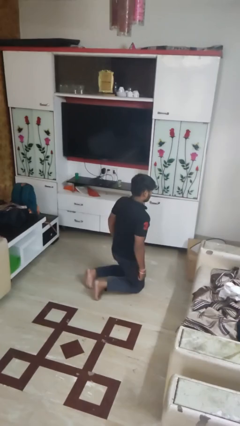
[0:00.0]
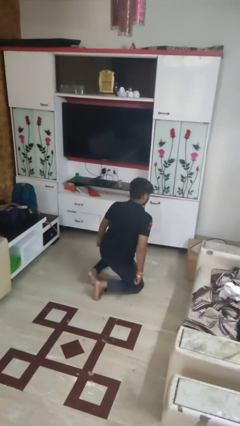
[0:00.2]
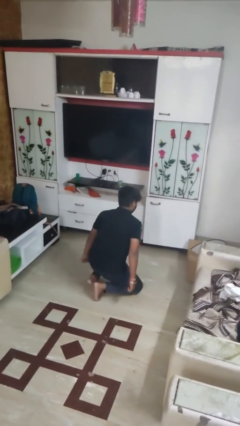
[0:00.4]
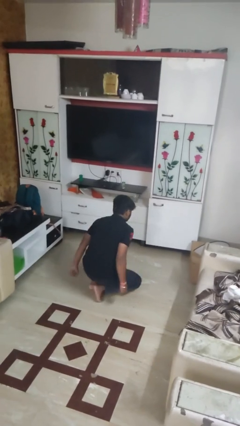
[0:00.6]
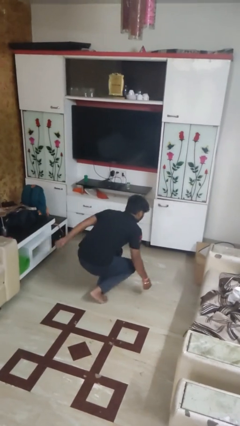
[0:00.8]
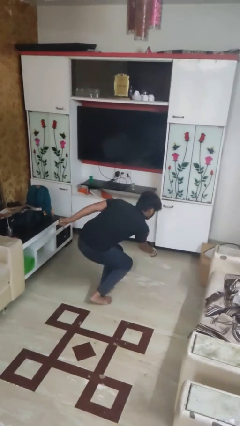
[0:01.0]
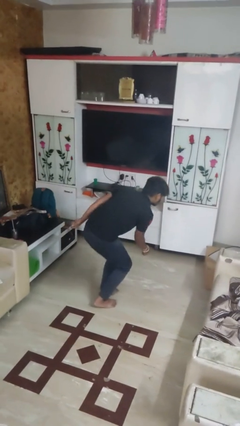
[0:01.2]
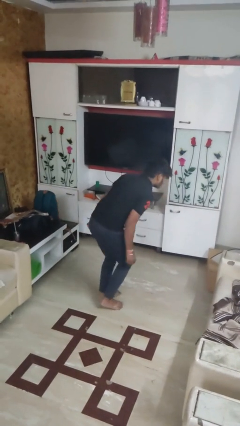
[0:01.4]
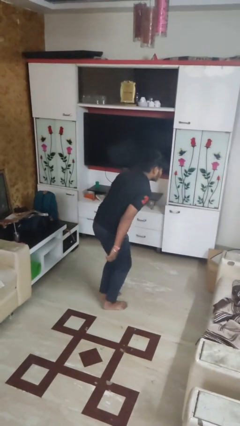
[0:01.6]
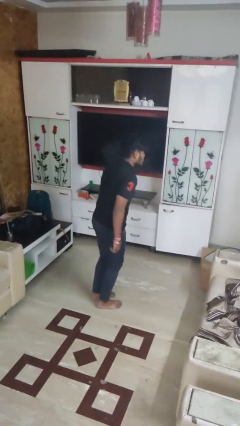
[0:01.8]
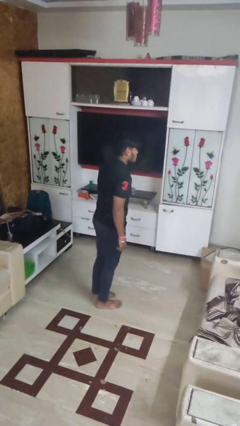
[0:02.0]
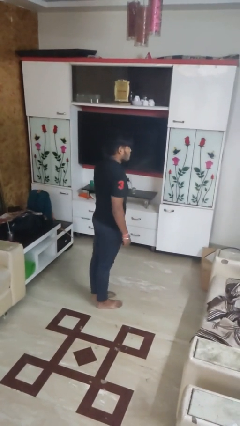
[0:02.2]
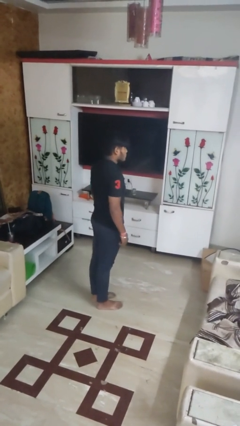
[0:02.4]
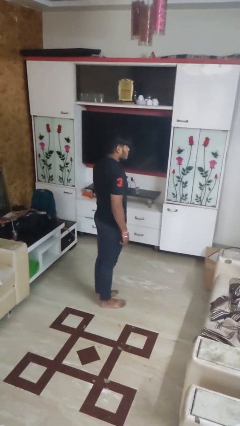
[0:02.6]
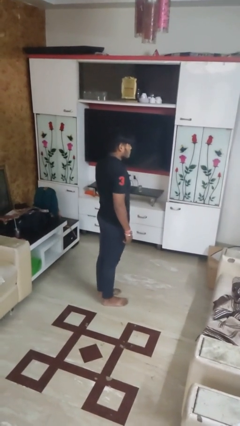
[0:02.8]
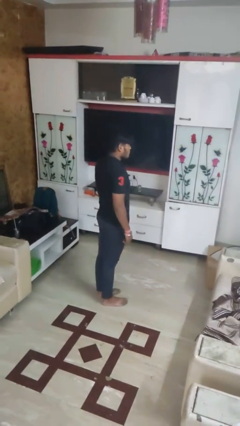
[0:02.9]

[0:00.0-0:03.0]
person stands up from floor

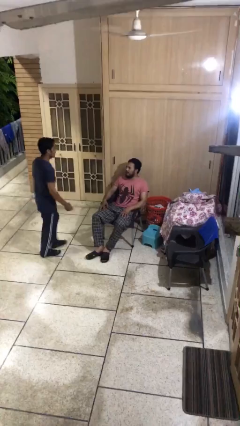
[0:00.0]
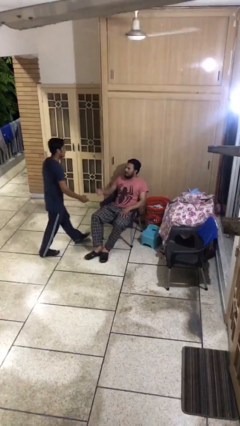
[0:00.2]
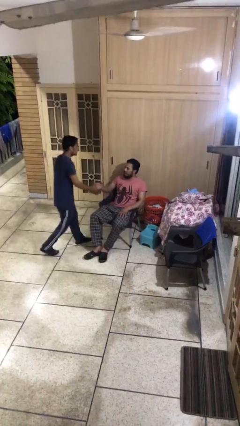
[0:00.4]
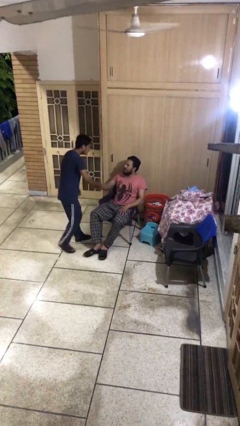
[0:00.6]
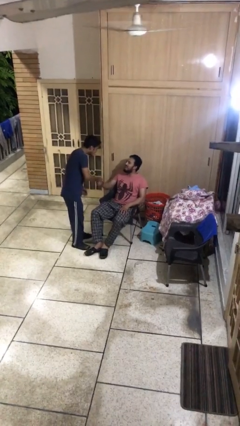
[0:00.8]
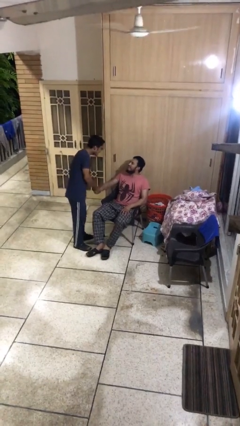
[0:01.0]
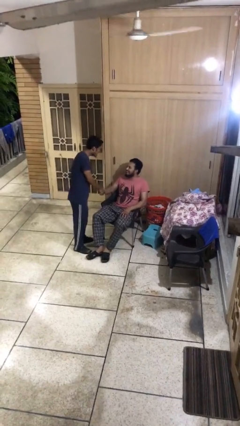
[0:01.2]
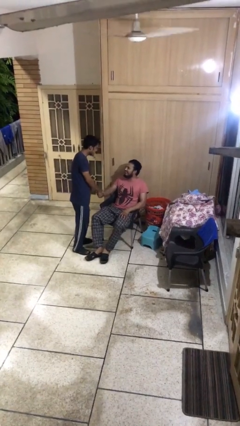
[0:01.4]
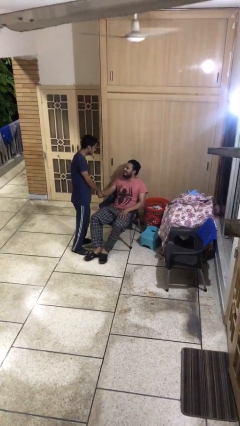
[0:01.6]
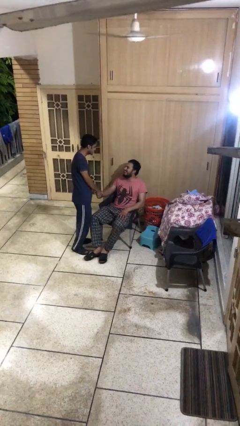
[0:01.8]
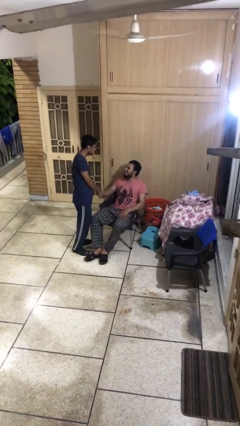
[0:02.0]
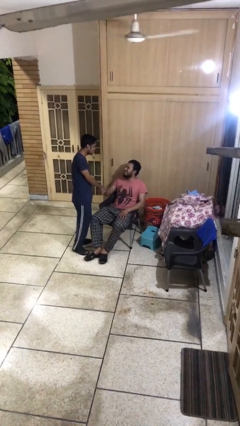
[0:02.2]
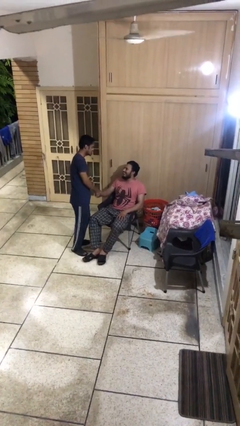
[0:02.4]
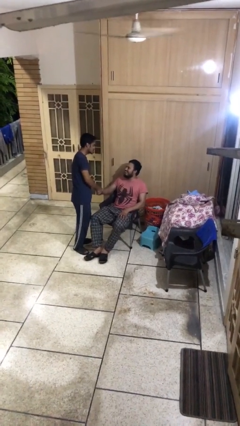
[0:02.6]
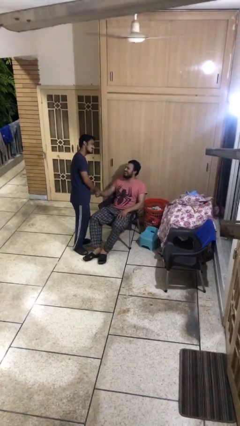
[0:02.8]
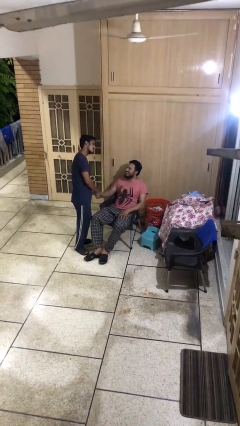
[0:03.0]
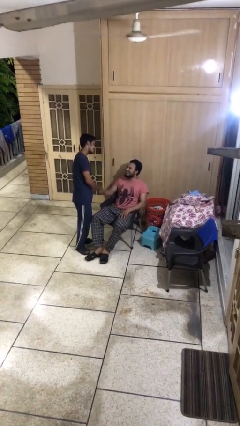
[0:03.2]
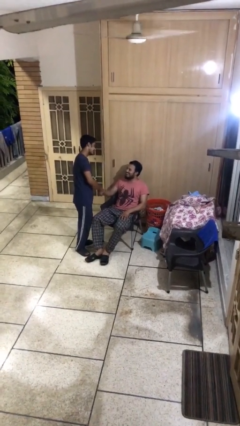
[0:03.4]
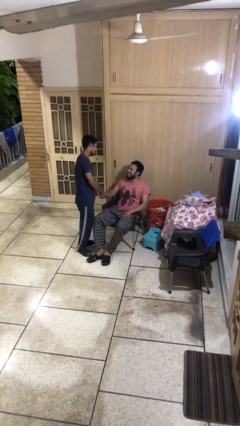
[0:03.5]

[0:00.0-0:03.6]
person shakes hand

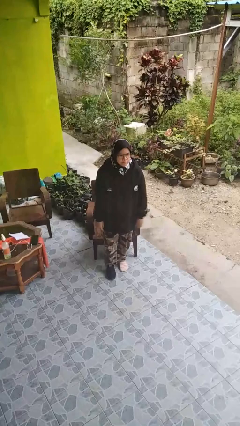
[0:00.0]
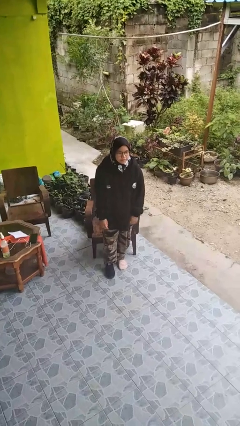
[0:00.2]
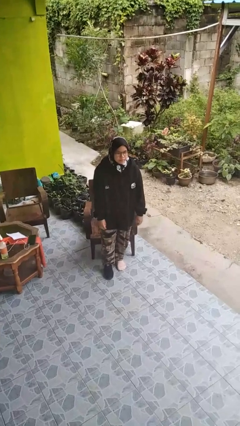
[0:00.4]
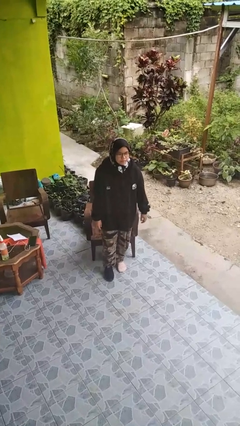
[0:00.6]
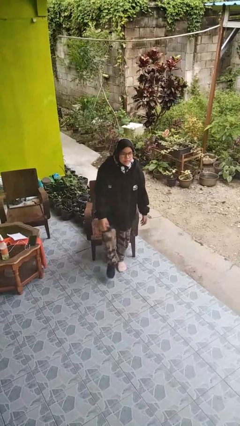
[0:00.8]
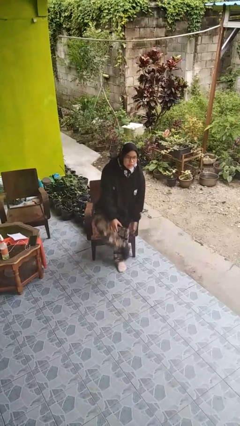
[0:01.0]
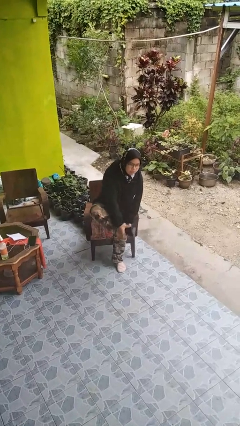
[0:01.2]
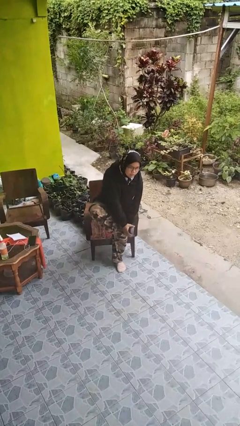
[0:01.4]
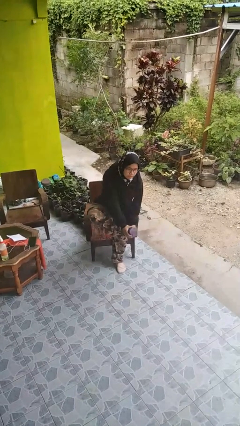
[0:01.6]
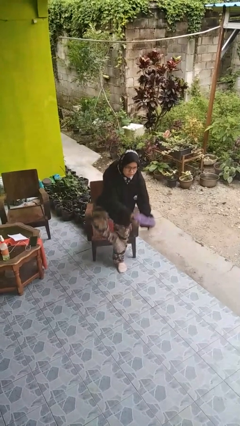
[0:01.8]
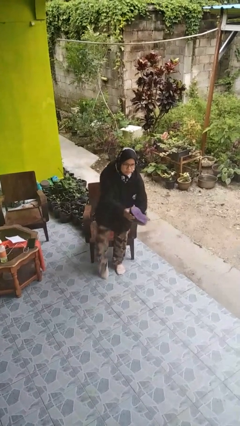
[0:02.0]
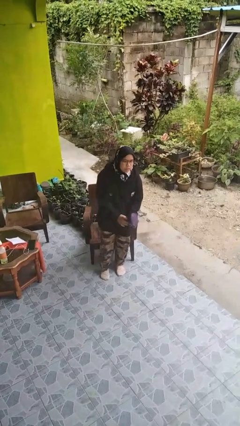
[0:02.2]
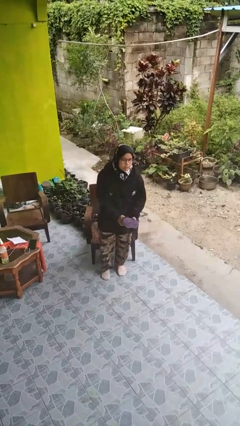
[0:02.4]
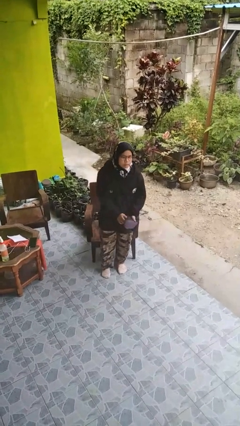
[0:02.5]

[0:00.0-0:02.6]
person takes off shoes

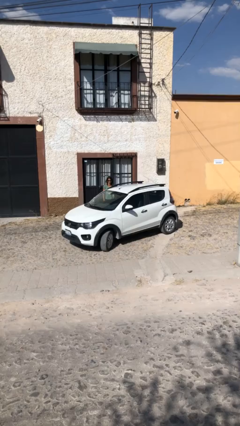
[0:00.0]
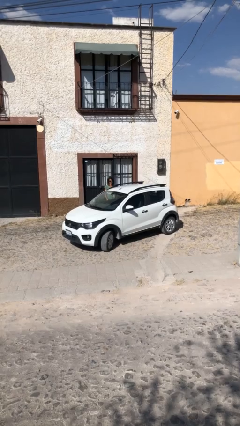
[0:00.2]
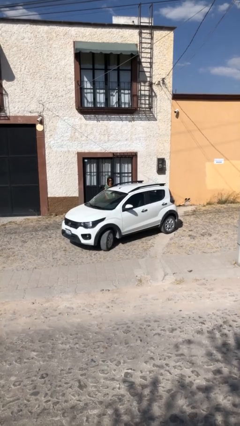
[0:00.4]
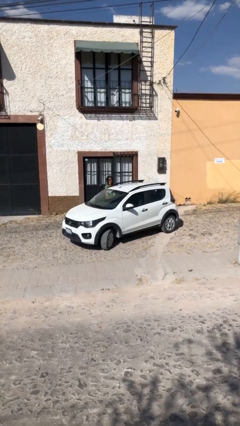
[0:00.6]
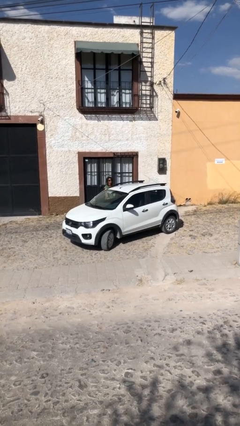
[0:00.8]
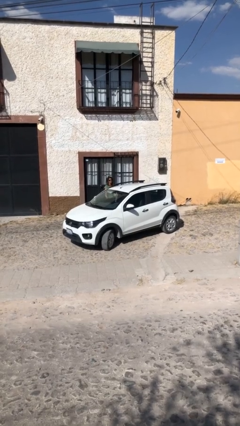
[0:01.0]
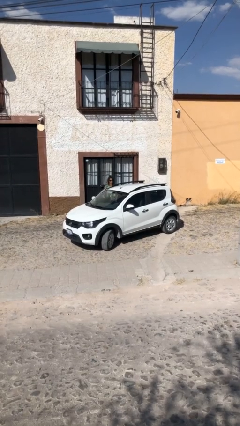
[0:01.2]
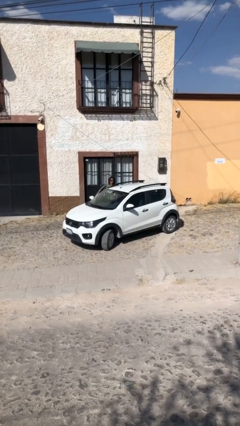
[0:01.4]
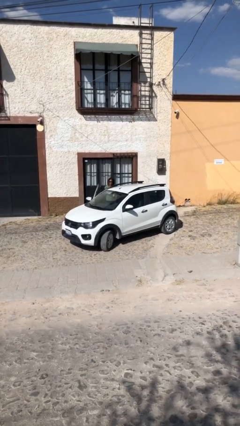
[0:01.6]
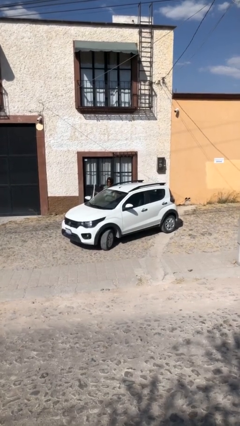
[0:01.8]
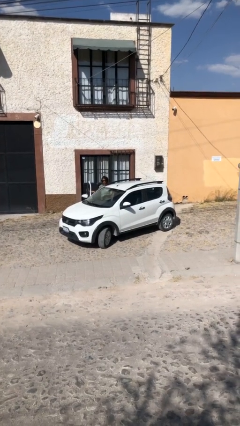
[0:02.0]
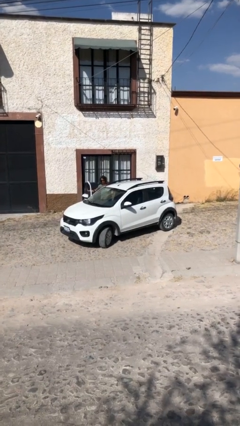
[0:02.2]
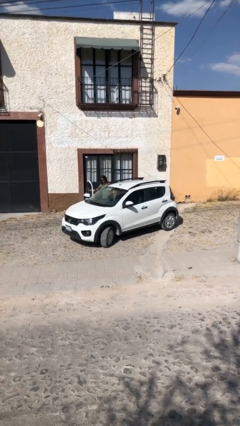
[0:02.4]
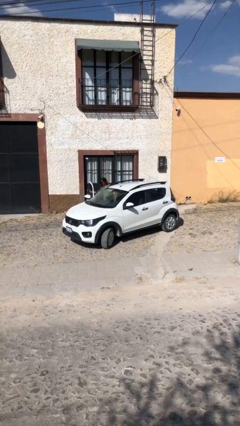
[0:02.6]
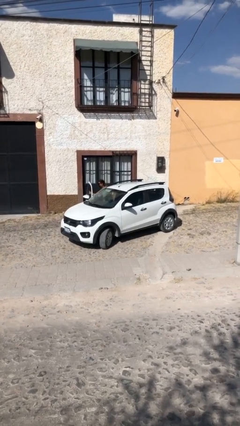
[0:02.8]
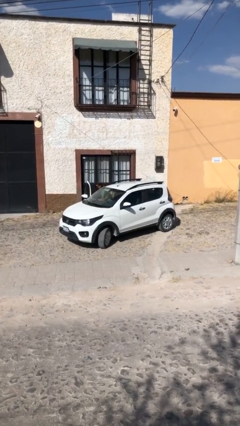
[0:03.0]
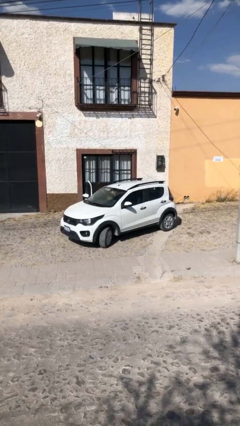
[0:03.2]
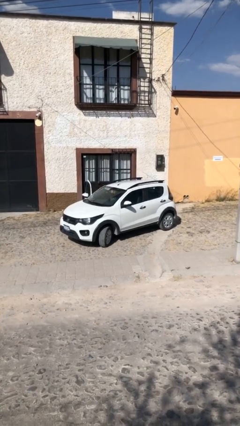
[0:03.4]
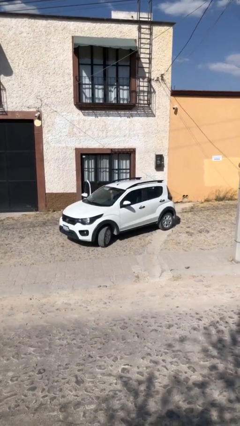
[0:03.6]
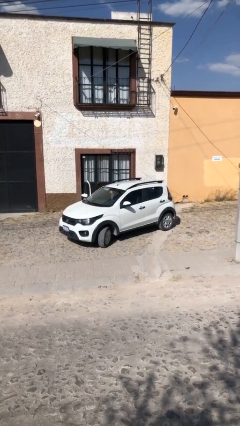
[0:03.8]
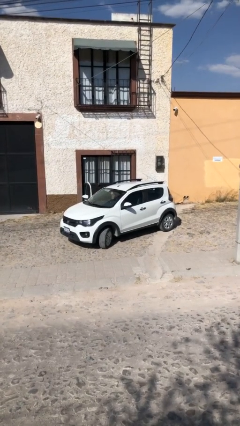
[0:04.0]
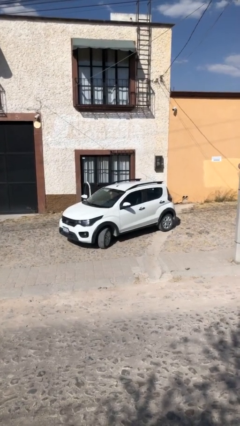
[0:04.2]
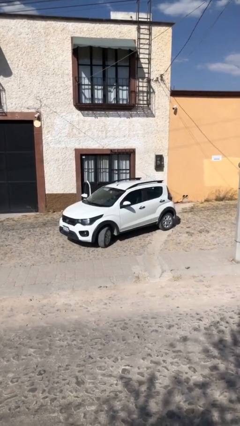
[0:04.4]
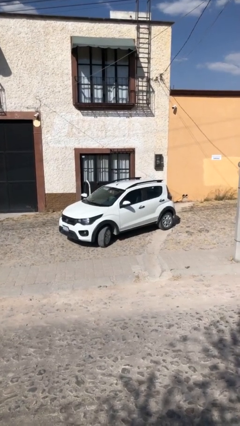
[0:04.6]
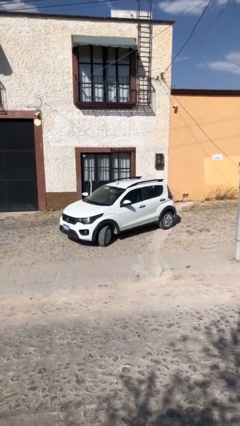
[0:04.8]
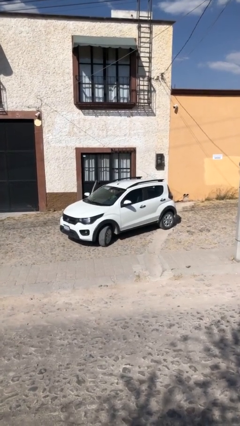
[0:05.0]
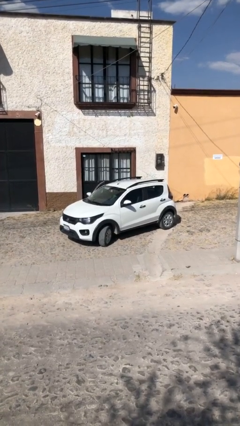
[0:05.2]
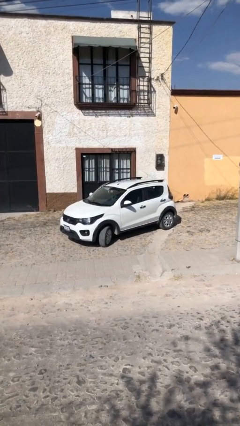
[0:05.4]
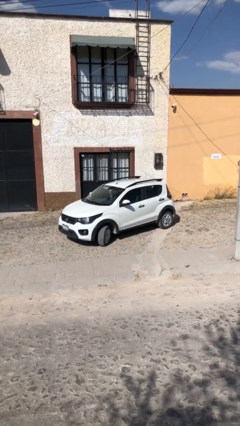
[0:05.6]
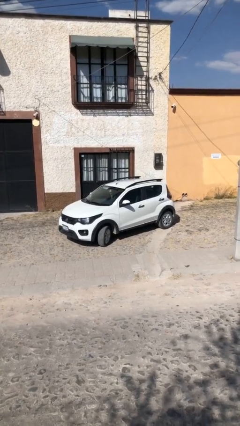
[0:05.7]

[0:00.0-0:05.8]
car picks up person

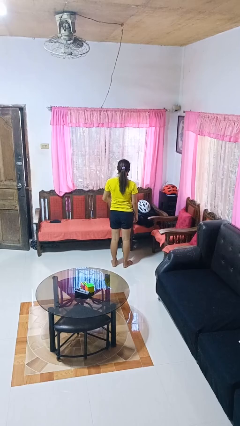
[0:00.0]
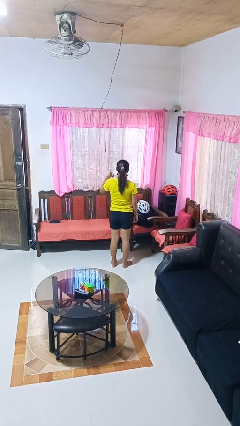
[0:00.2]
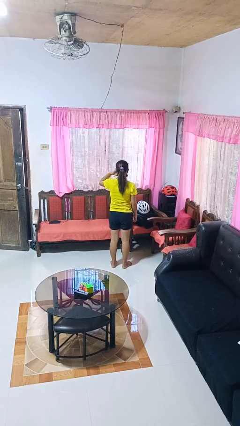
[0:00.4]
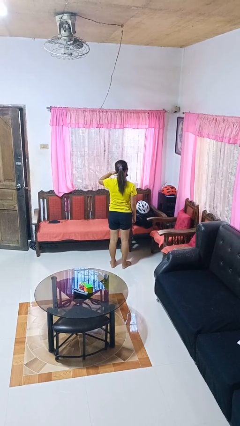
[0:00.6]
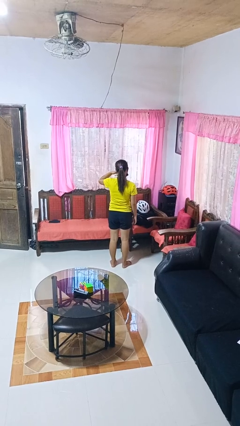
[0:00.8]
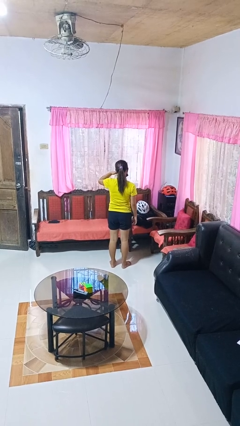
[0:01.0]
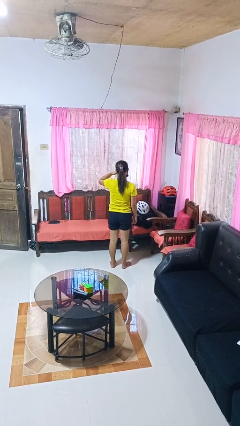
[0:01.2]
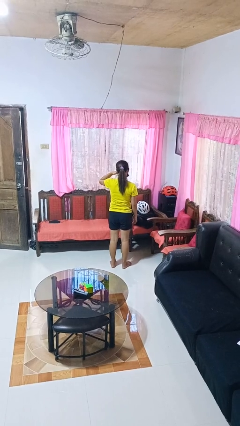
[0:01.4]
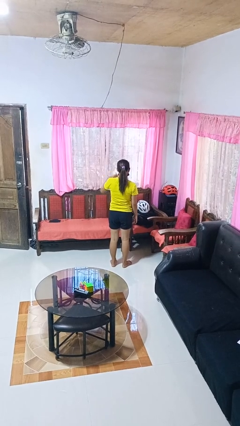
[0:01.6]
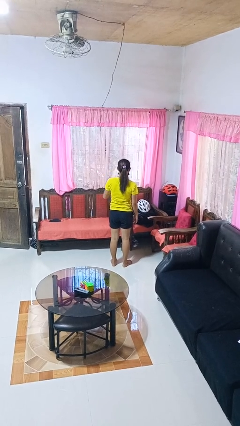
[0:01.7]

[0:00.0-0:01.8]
person gestures call me

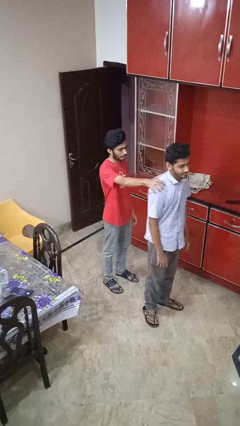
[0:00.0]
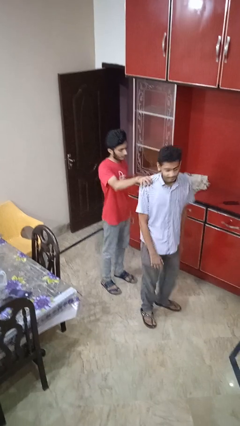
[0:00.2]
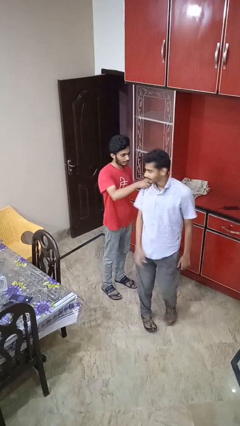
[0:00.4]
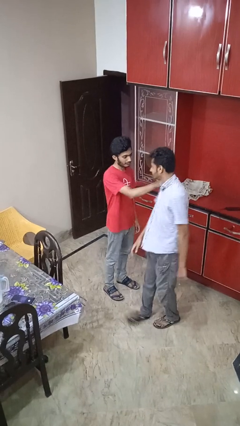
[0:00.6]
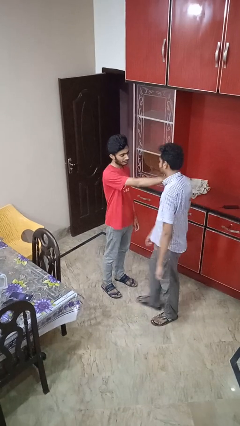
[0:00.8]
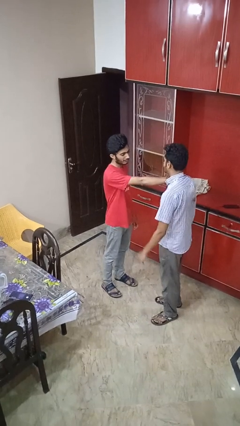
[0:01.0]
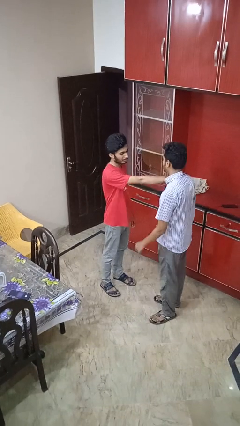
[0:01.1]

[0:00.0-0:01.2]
person spins person around
